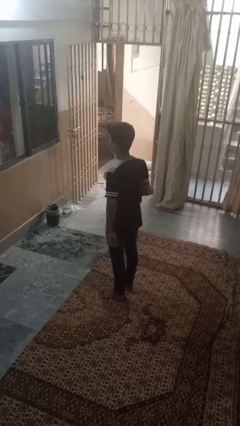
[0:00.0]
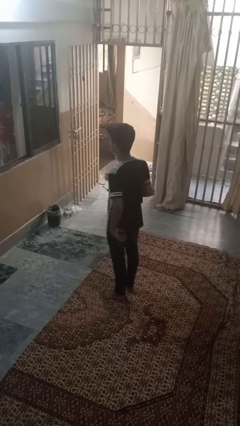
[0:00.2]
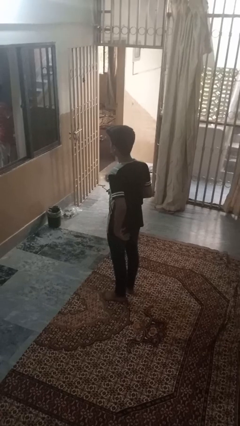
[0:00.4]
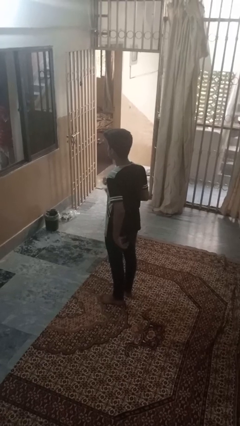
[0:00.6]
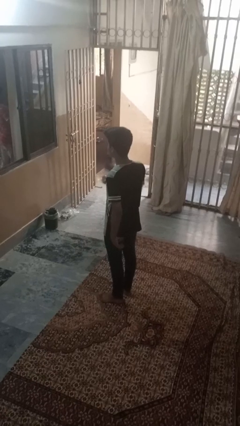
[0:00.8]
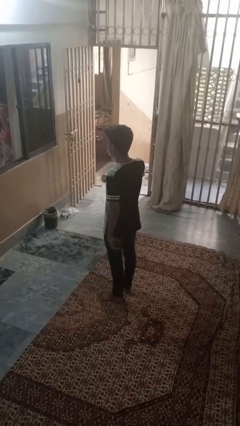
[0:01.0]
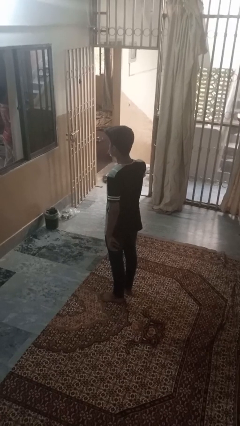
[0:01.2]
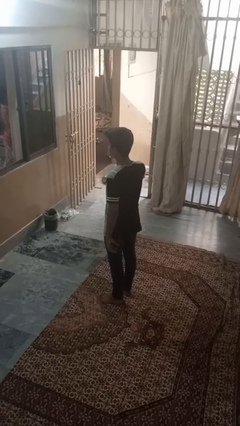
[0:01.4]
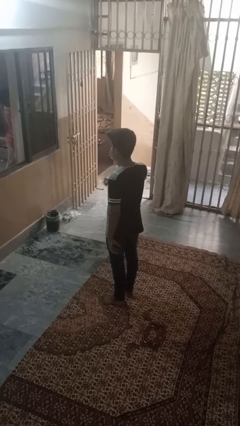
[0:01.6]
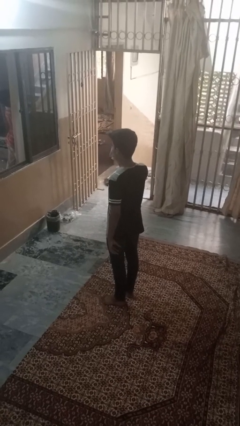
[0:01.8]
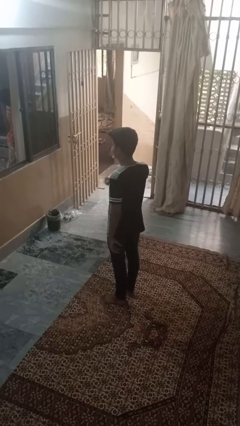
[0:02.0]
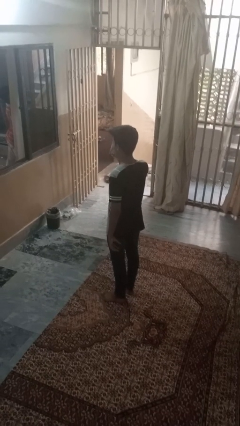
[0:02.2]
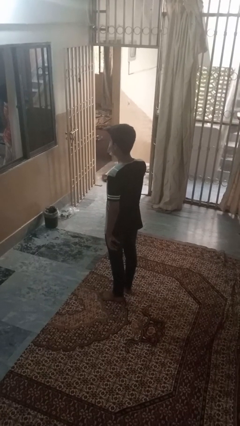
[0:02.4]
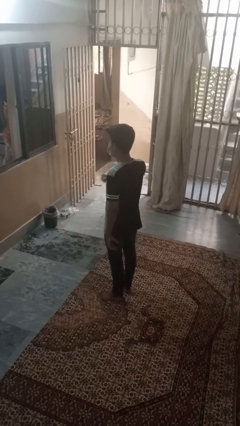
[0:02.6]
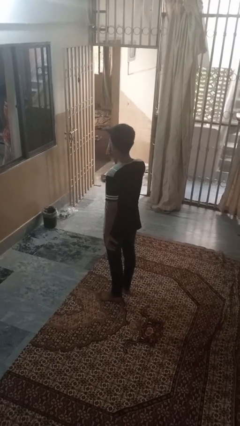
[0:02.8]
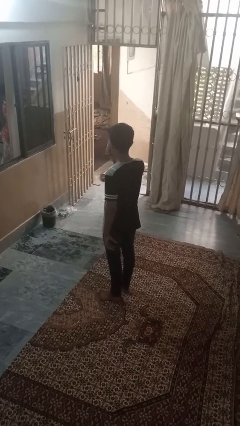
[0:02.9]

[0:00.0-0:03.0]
person shades eyes

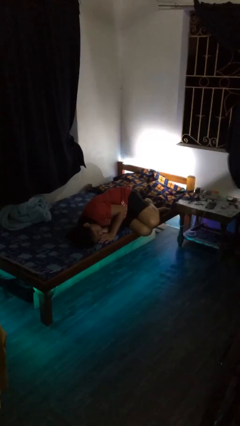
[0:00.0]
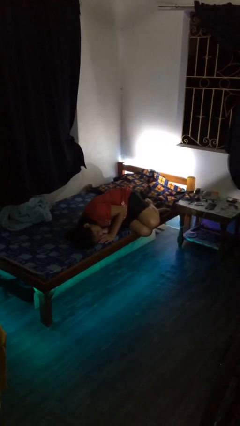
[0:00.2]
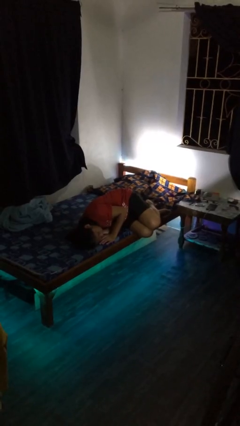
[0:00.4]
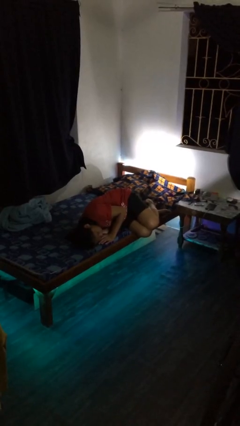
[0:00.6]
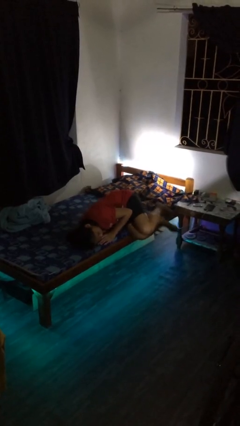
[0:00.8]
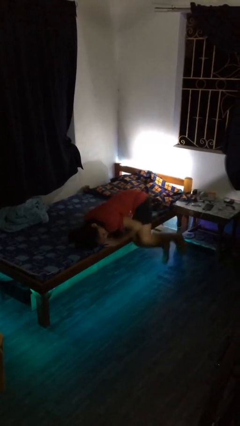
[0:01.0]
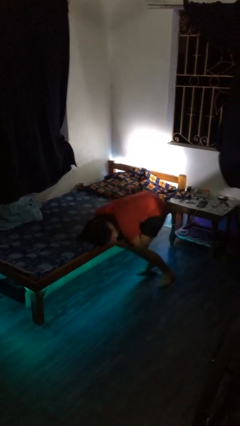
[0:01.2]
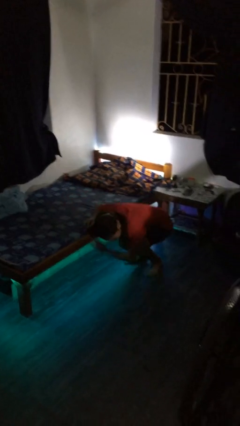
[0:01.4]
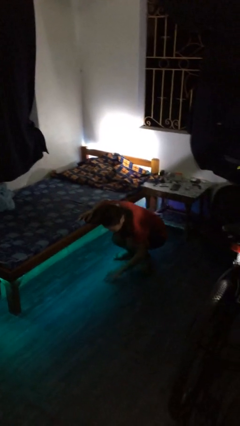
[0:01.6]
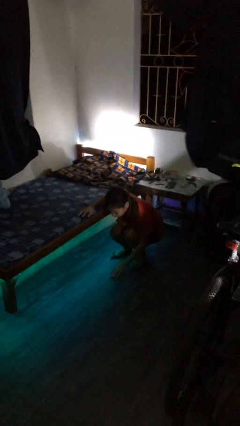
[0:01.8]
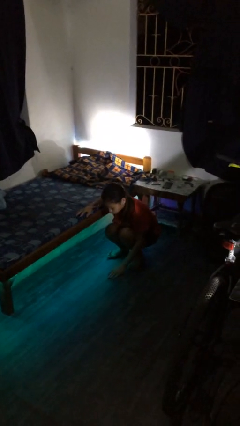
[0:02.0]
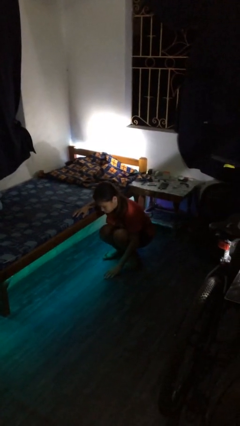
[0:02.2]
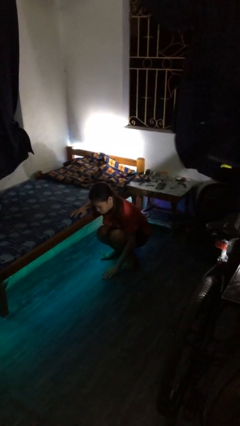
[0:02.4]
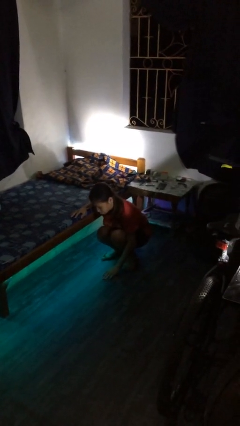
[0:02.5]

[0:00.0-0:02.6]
person falls from bed

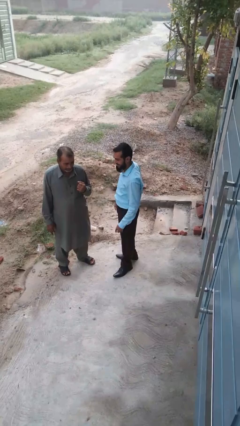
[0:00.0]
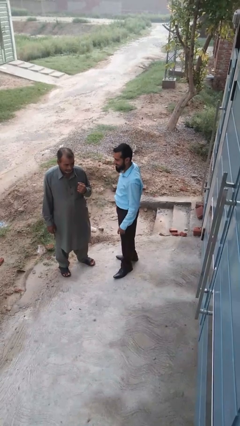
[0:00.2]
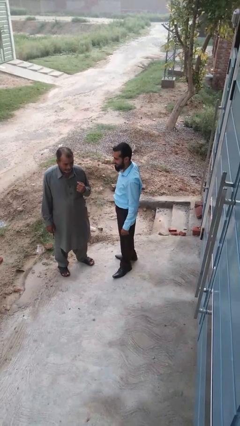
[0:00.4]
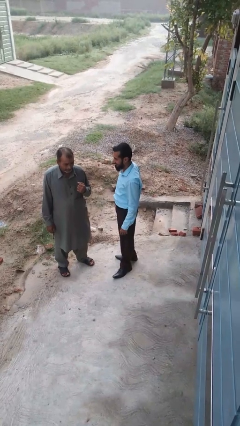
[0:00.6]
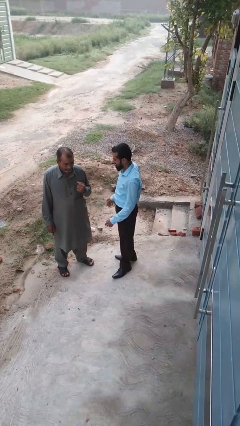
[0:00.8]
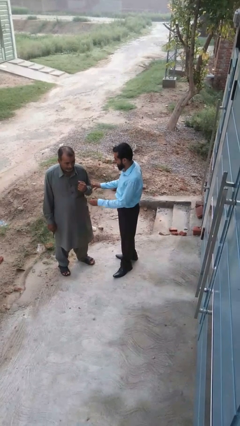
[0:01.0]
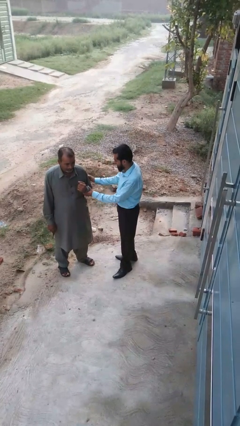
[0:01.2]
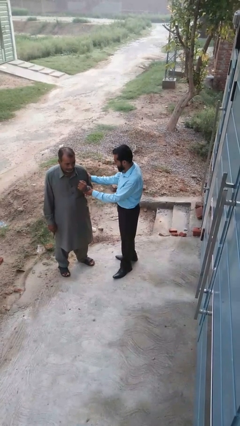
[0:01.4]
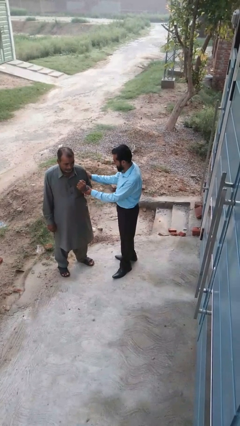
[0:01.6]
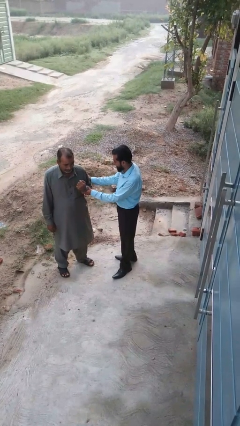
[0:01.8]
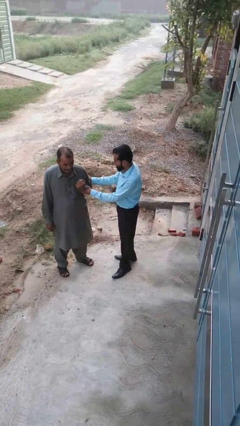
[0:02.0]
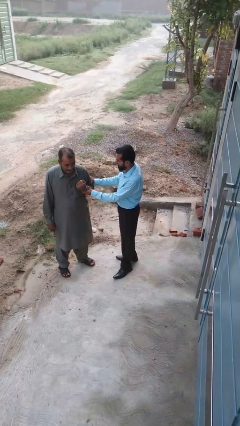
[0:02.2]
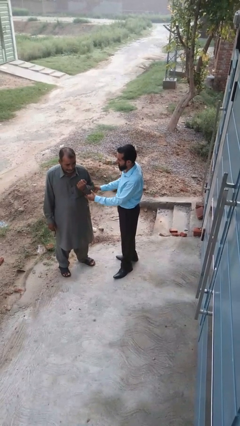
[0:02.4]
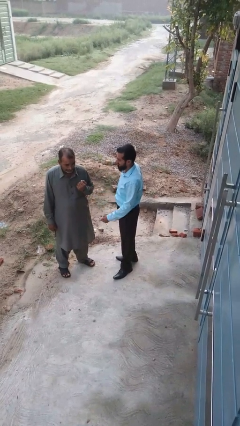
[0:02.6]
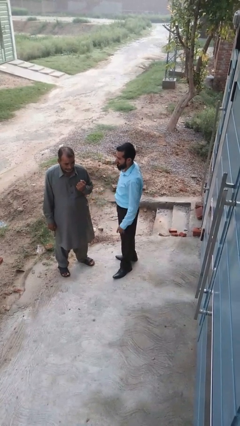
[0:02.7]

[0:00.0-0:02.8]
person grabs person by bicep

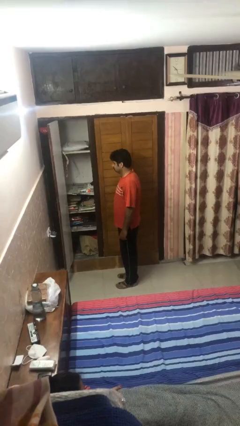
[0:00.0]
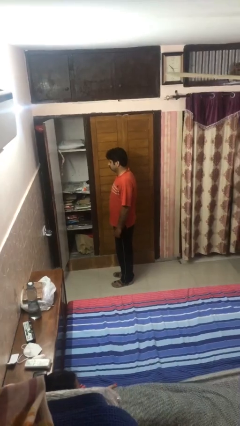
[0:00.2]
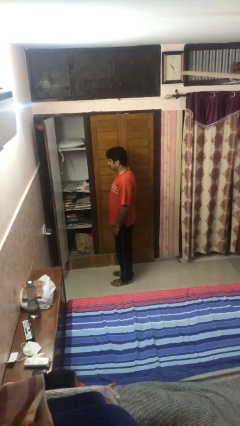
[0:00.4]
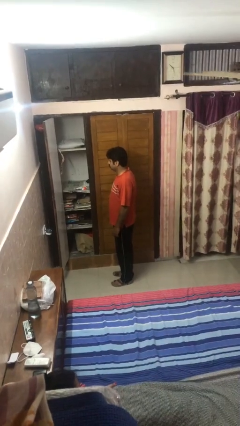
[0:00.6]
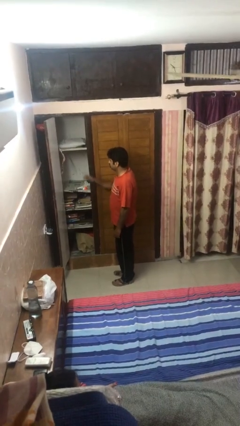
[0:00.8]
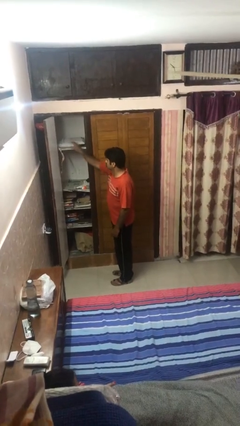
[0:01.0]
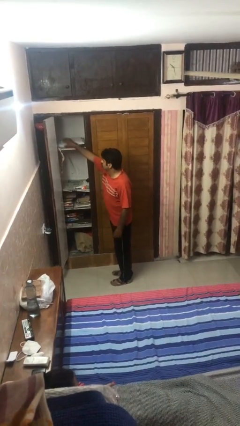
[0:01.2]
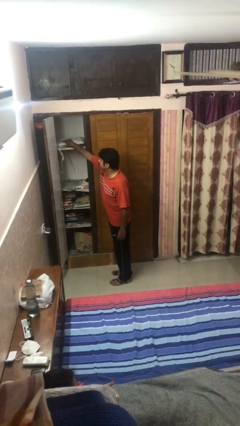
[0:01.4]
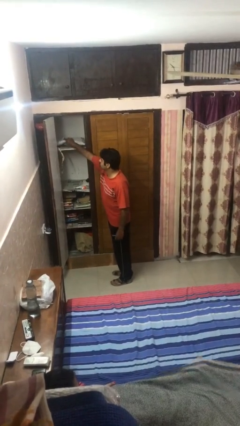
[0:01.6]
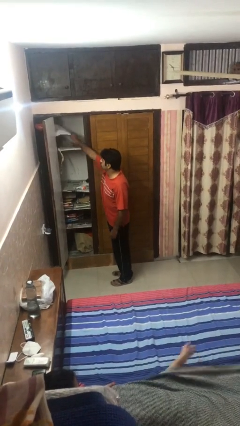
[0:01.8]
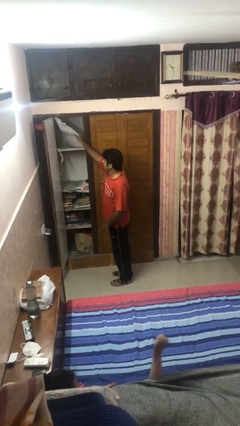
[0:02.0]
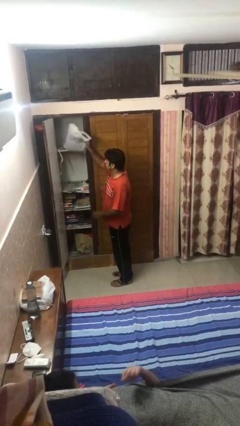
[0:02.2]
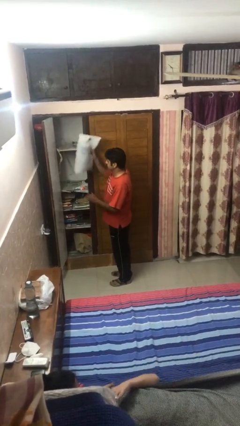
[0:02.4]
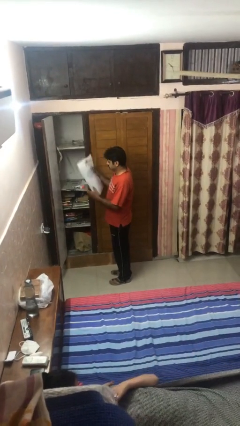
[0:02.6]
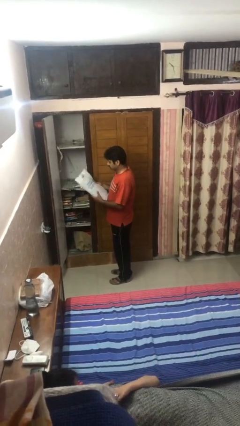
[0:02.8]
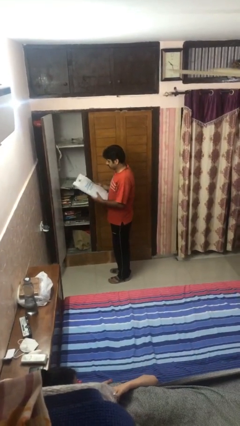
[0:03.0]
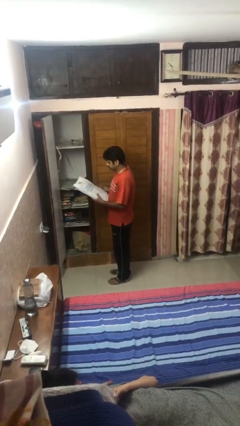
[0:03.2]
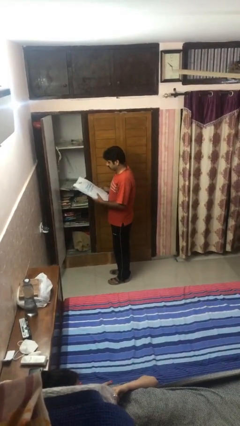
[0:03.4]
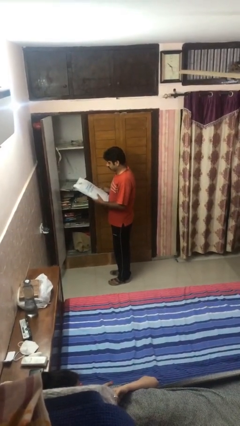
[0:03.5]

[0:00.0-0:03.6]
person picks up object from shelf

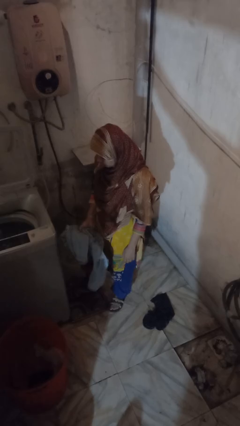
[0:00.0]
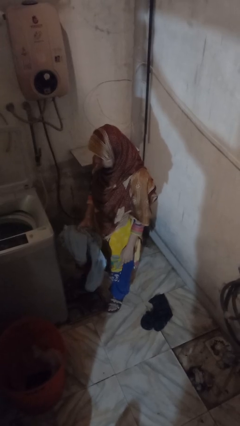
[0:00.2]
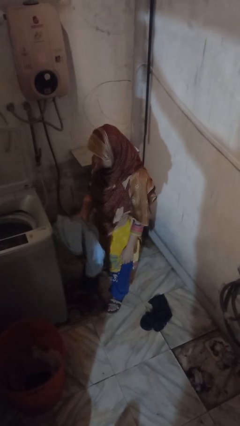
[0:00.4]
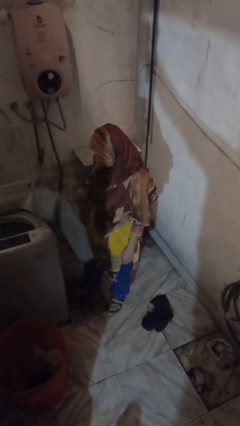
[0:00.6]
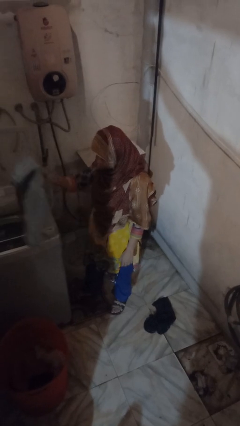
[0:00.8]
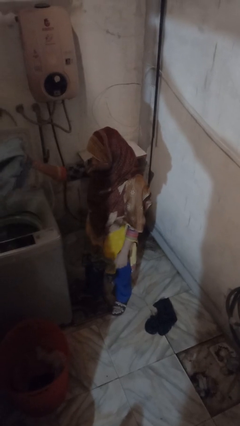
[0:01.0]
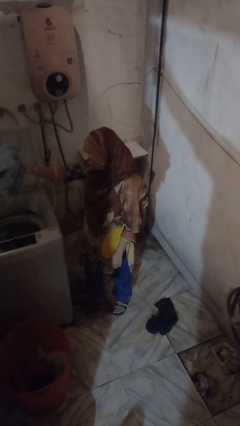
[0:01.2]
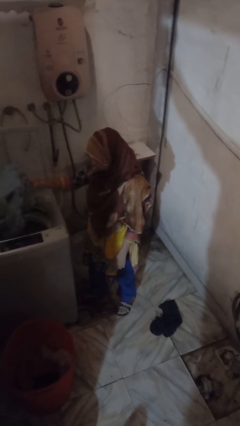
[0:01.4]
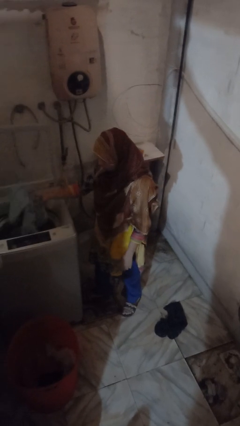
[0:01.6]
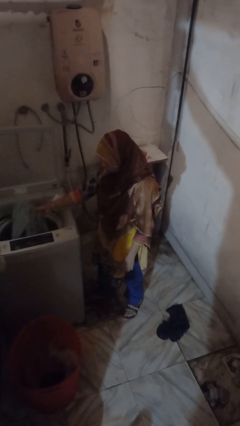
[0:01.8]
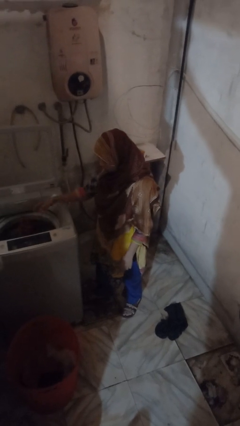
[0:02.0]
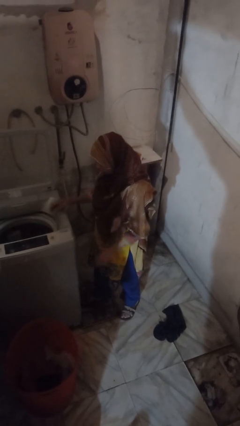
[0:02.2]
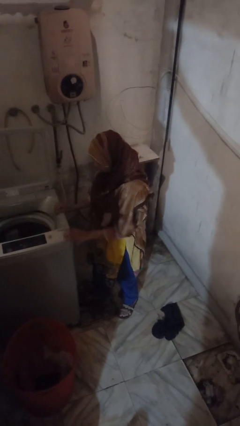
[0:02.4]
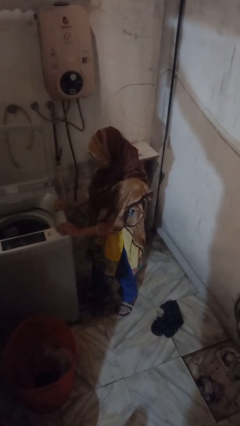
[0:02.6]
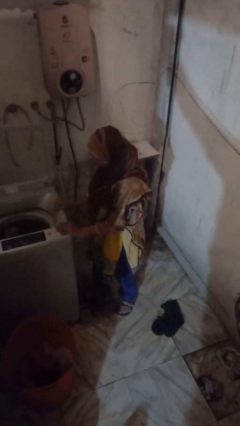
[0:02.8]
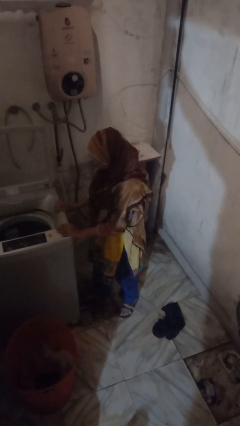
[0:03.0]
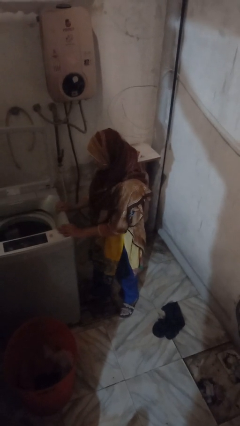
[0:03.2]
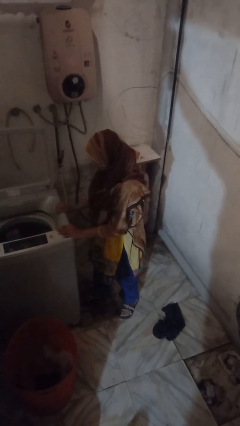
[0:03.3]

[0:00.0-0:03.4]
person loads dryer

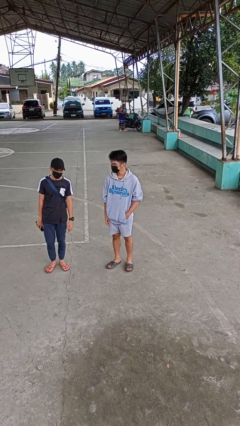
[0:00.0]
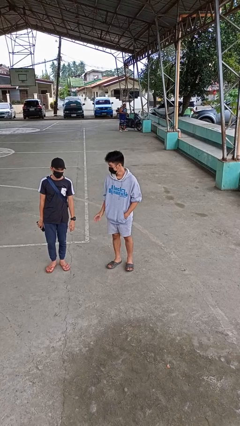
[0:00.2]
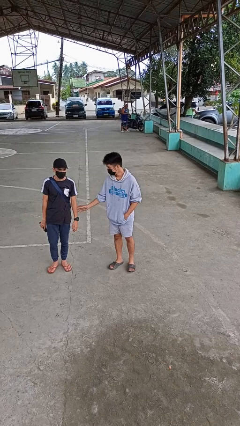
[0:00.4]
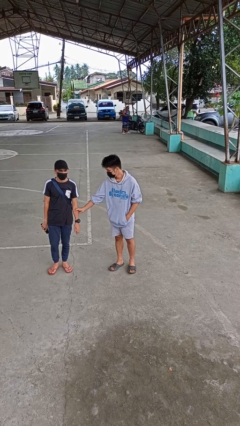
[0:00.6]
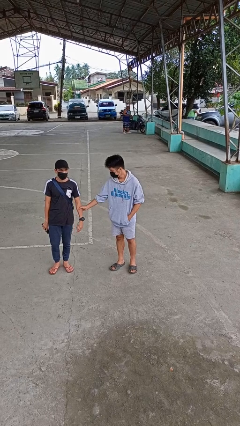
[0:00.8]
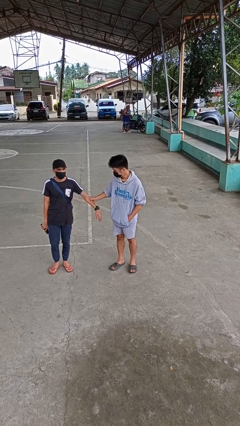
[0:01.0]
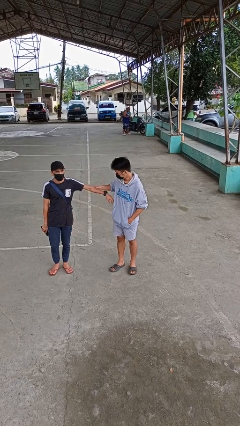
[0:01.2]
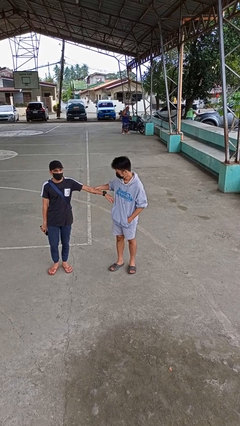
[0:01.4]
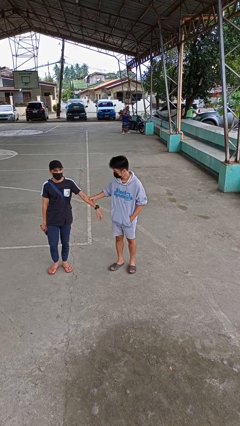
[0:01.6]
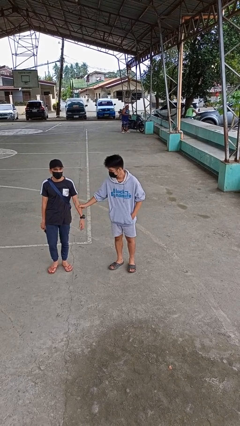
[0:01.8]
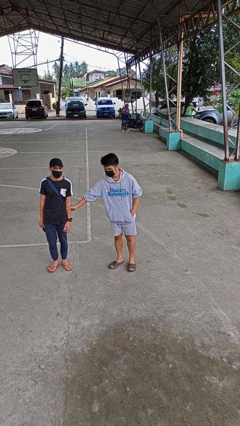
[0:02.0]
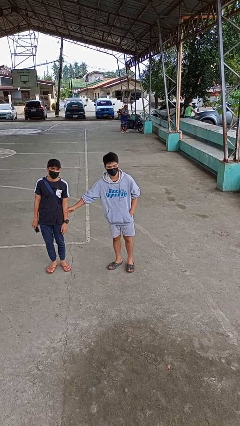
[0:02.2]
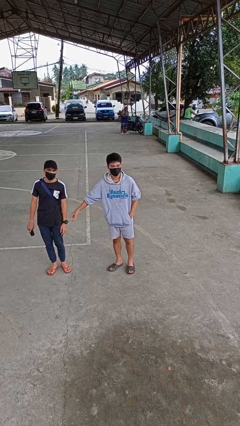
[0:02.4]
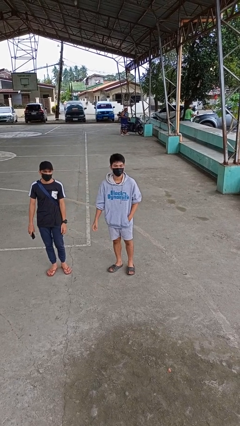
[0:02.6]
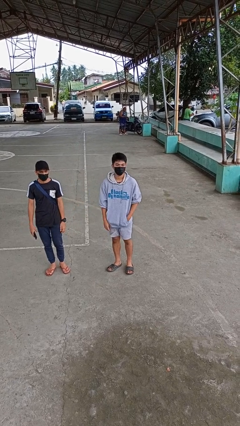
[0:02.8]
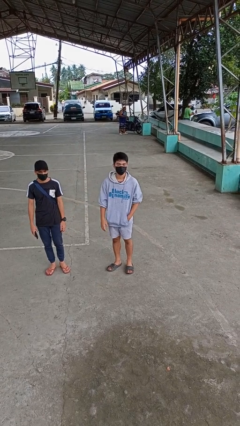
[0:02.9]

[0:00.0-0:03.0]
person grabs person by forearm
